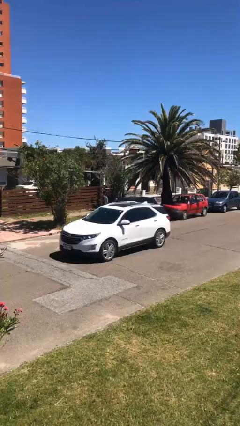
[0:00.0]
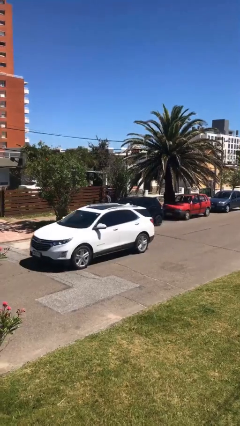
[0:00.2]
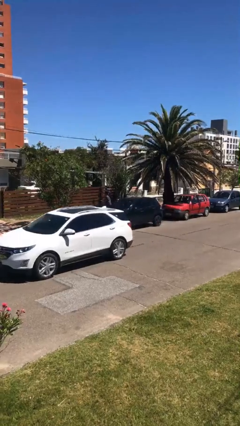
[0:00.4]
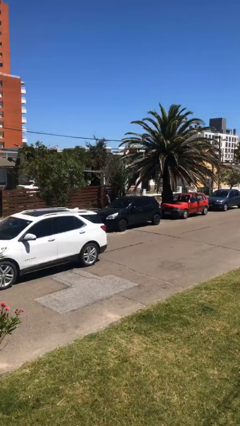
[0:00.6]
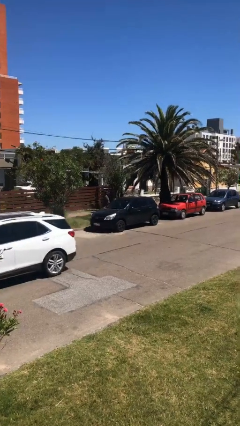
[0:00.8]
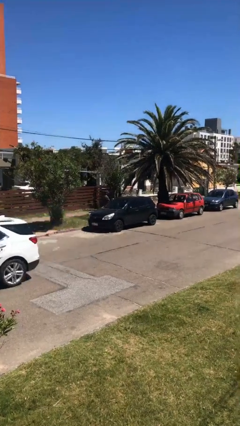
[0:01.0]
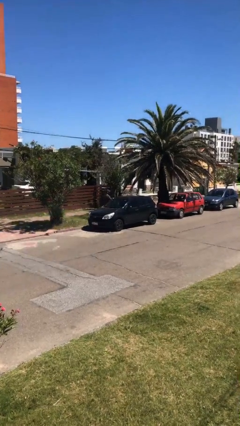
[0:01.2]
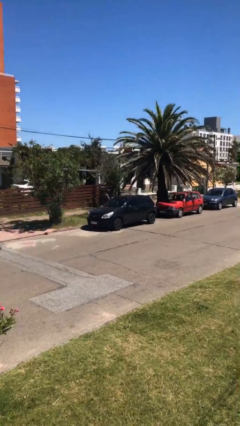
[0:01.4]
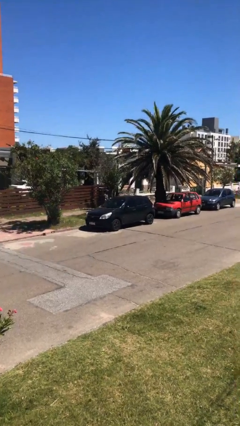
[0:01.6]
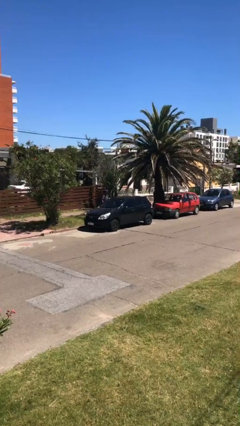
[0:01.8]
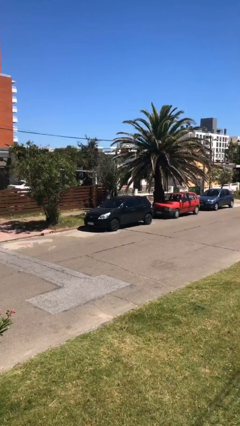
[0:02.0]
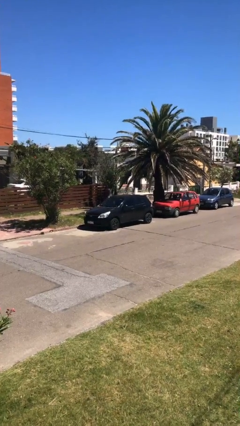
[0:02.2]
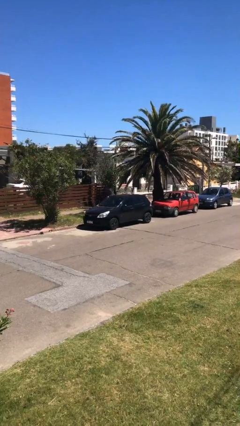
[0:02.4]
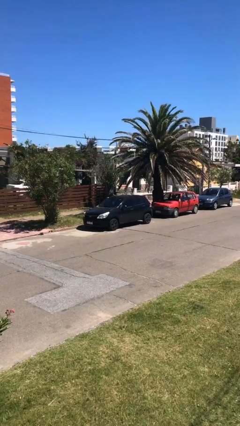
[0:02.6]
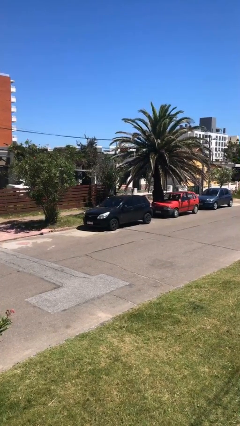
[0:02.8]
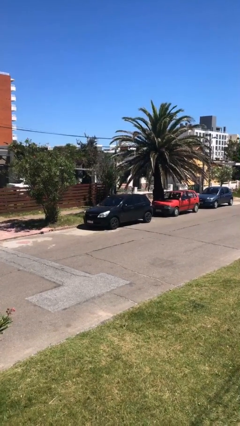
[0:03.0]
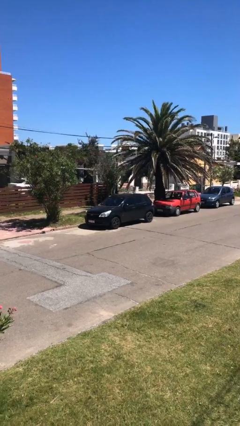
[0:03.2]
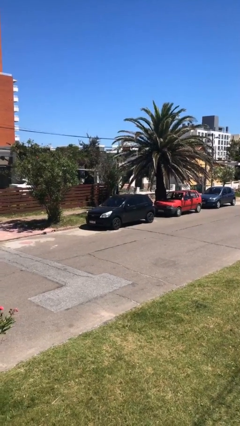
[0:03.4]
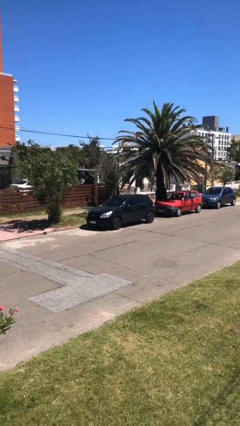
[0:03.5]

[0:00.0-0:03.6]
car picks up person

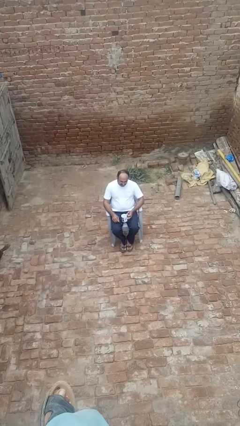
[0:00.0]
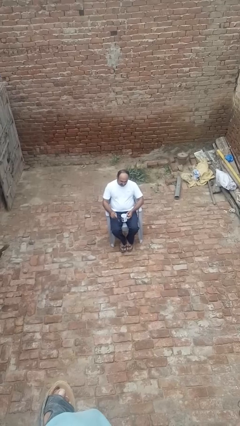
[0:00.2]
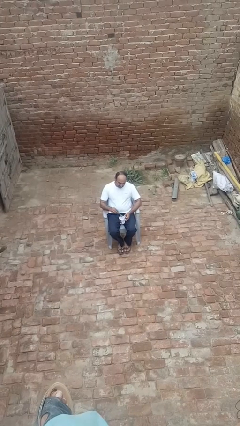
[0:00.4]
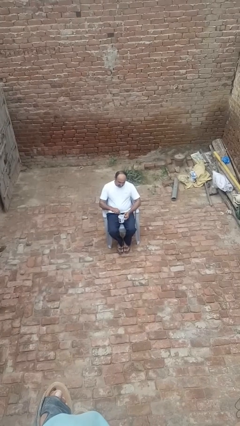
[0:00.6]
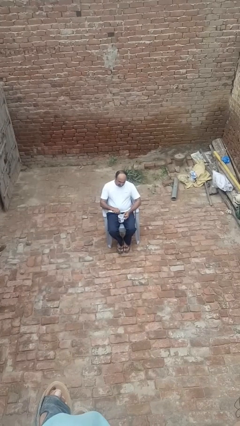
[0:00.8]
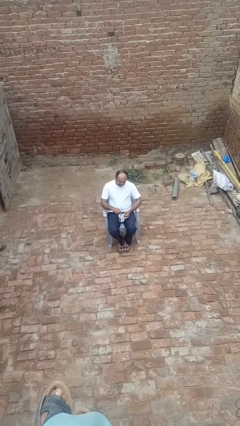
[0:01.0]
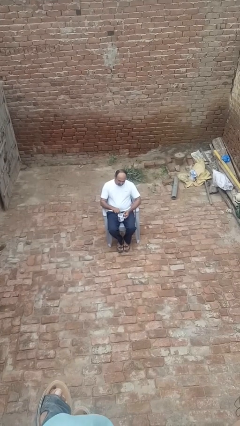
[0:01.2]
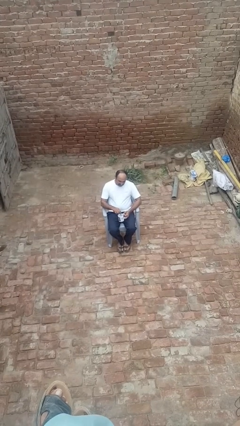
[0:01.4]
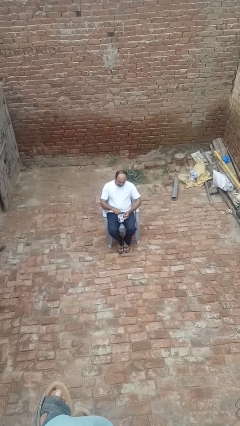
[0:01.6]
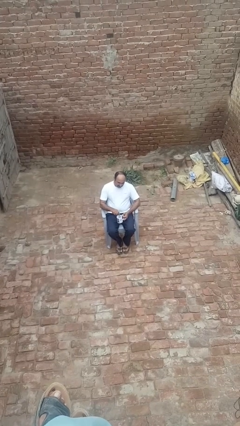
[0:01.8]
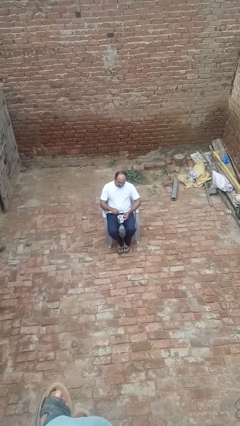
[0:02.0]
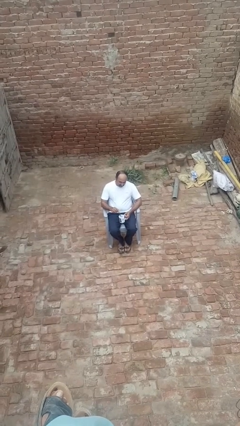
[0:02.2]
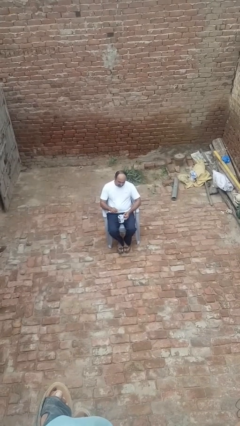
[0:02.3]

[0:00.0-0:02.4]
person stirs mug

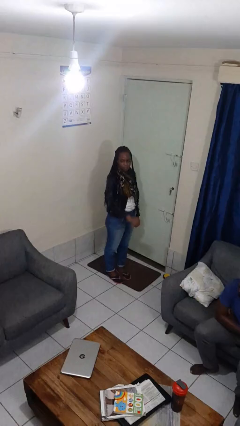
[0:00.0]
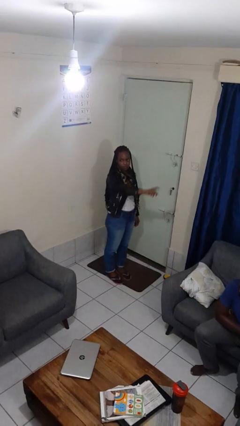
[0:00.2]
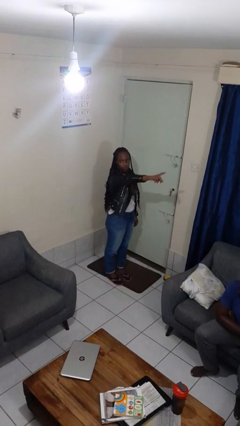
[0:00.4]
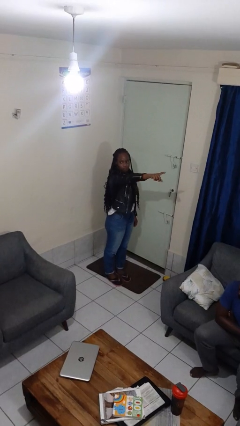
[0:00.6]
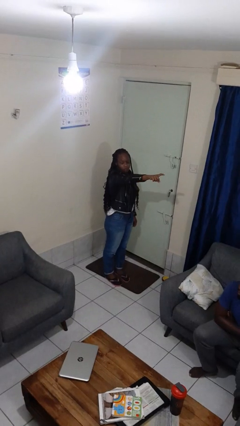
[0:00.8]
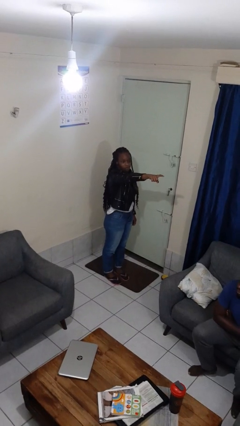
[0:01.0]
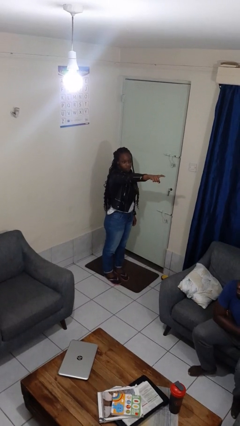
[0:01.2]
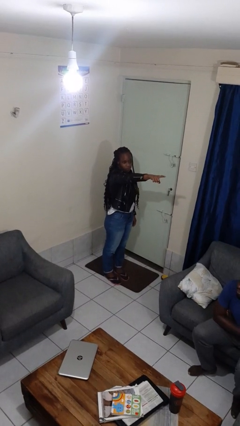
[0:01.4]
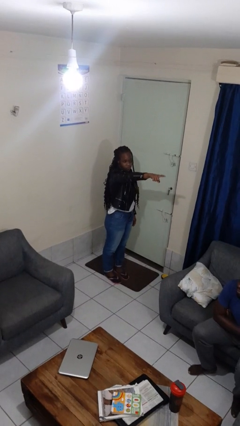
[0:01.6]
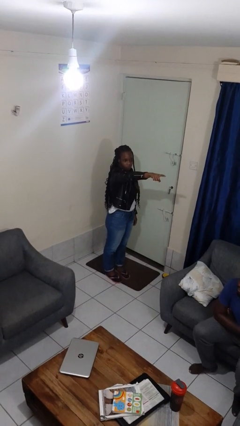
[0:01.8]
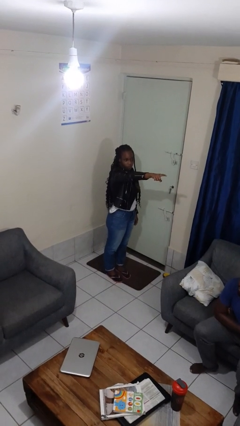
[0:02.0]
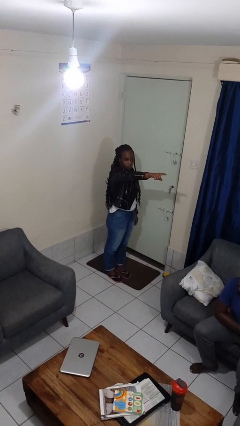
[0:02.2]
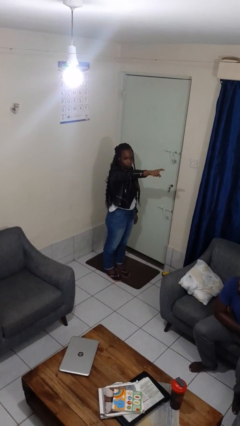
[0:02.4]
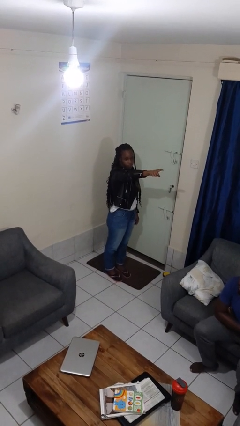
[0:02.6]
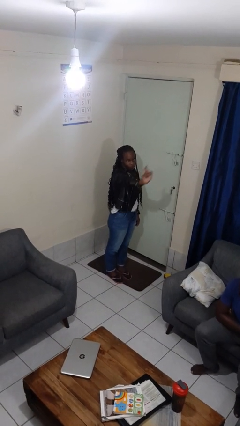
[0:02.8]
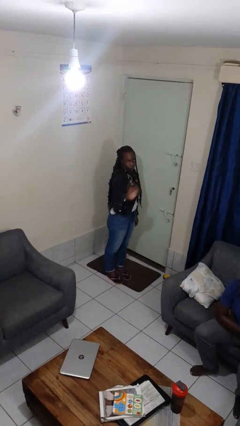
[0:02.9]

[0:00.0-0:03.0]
person points at person

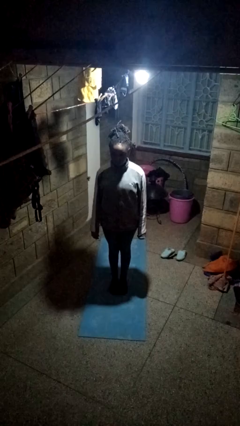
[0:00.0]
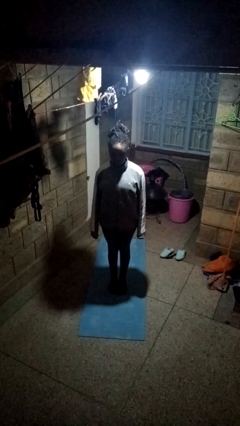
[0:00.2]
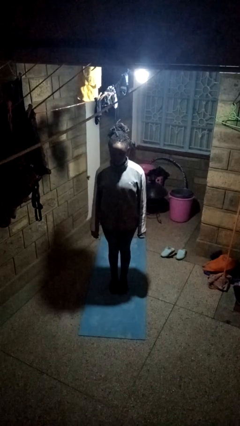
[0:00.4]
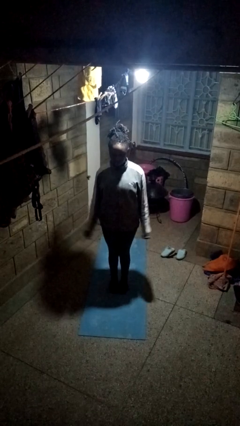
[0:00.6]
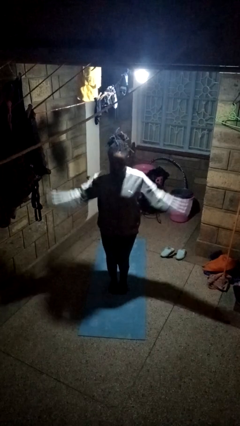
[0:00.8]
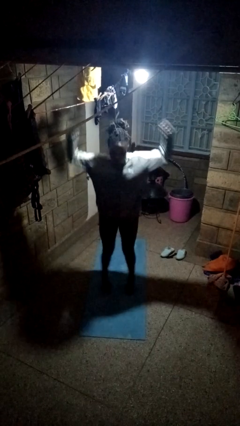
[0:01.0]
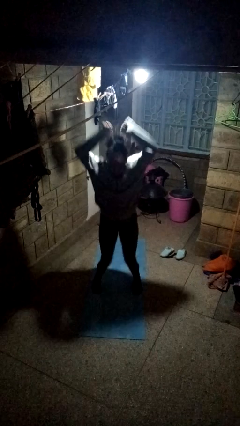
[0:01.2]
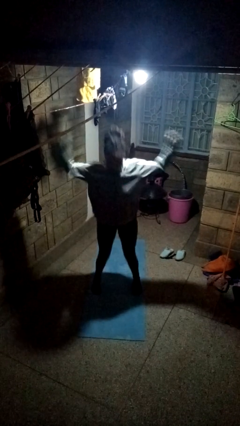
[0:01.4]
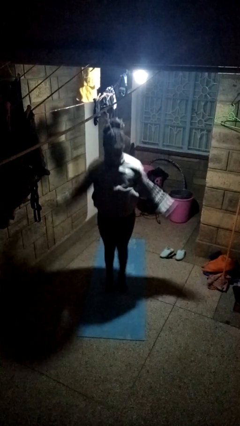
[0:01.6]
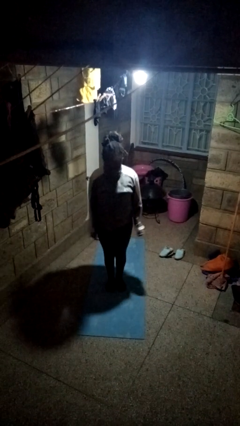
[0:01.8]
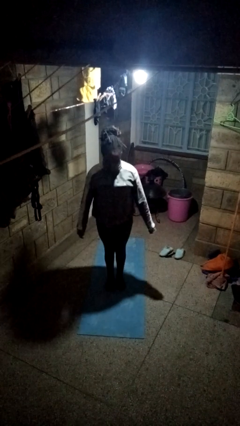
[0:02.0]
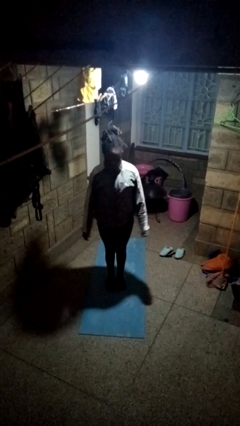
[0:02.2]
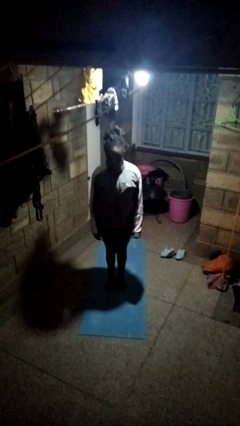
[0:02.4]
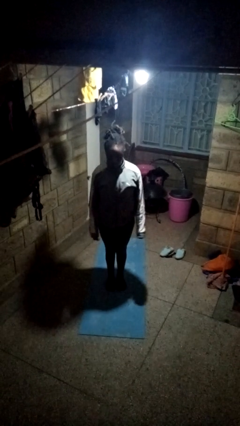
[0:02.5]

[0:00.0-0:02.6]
person exercises with jumping jacks

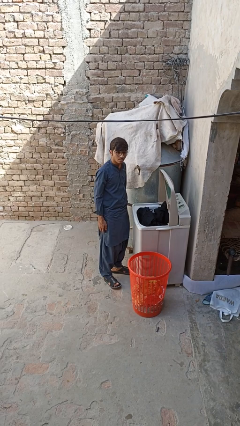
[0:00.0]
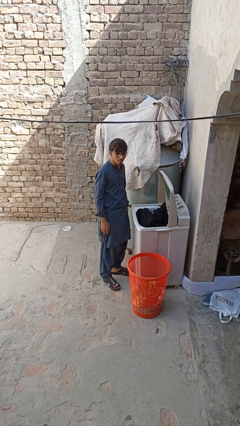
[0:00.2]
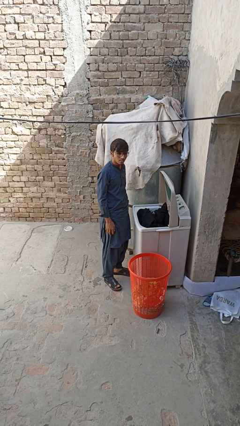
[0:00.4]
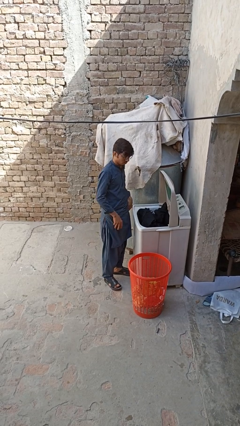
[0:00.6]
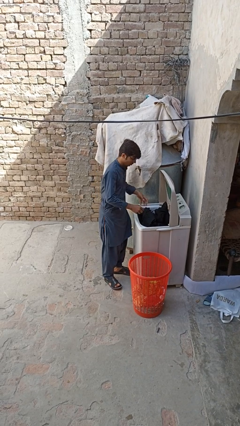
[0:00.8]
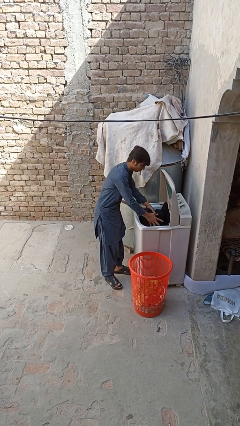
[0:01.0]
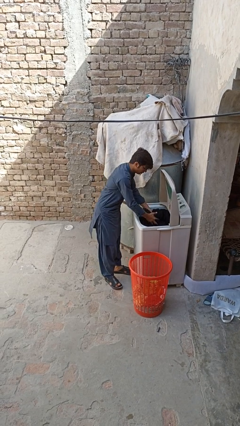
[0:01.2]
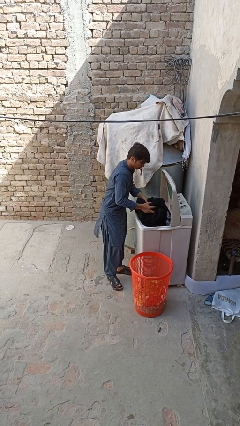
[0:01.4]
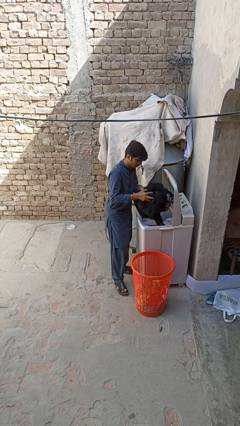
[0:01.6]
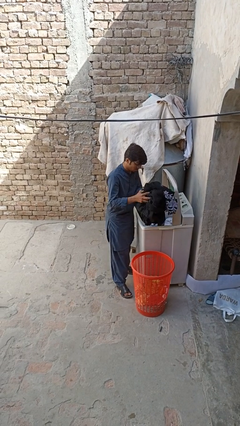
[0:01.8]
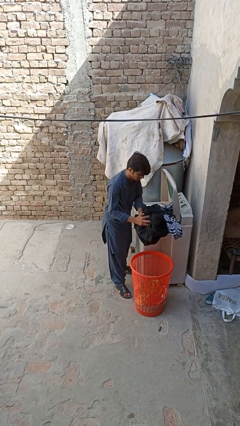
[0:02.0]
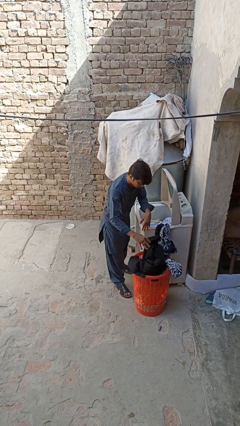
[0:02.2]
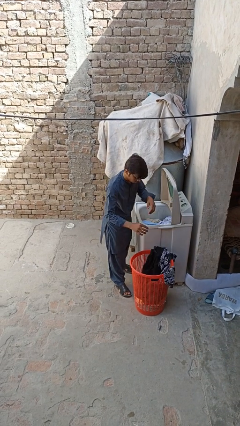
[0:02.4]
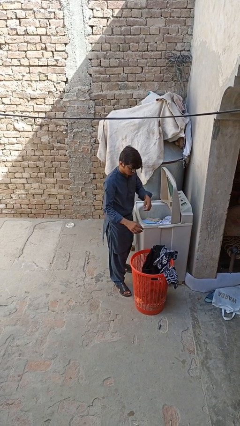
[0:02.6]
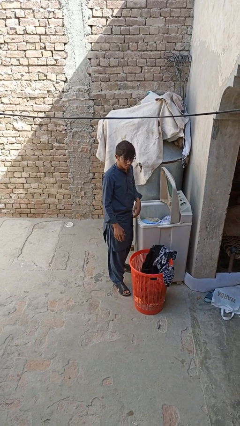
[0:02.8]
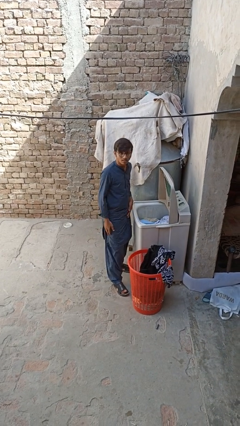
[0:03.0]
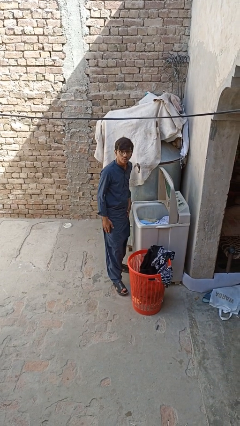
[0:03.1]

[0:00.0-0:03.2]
person unloads clotheswasher

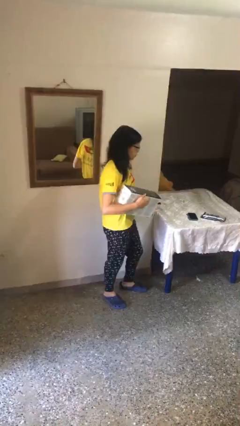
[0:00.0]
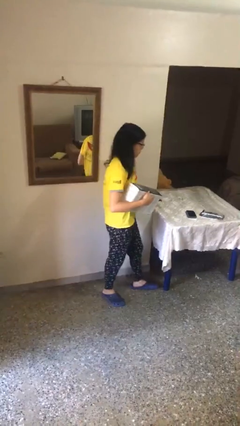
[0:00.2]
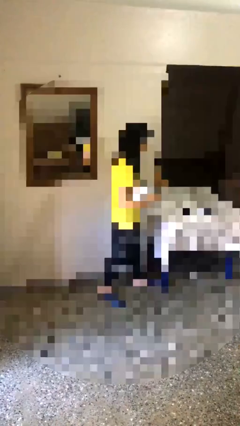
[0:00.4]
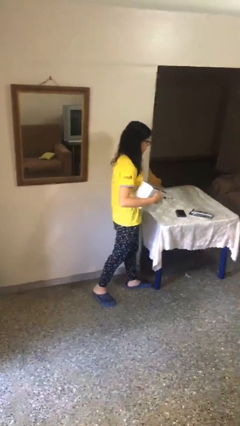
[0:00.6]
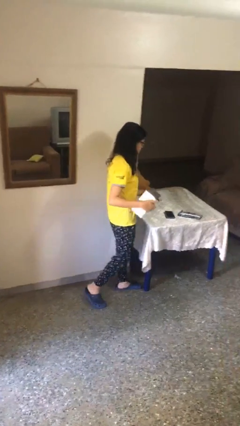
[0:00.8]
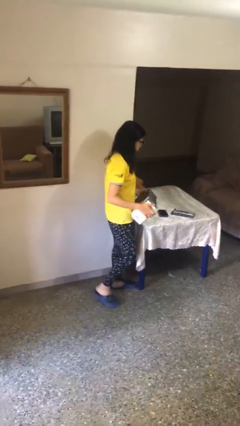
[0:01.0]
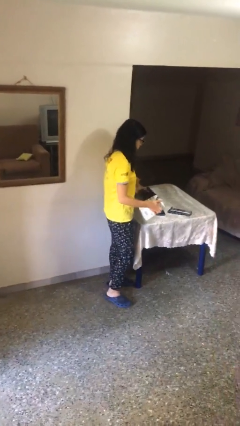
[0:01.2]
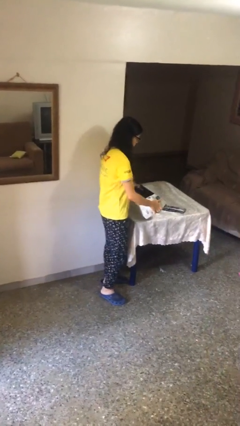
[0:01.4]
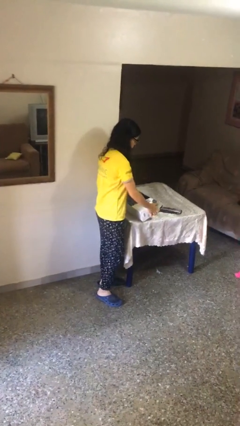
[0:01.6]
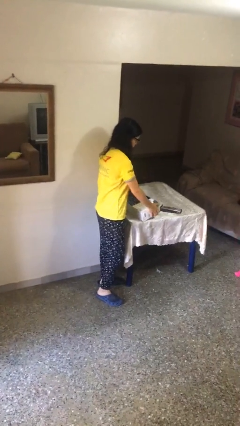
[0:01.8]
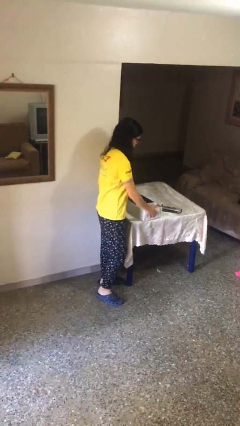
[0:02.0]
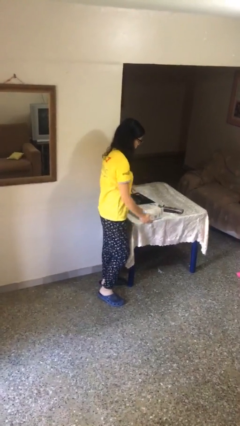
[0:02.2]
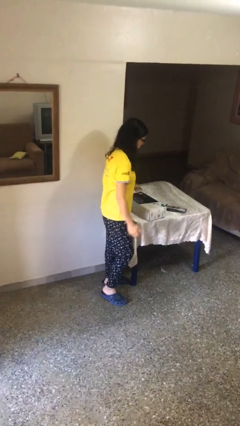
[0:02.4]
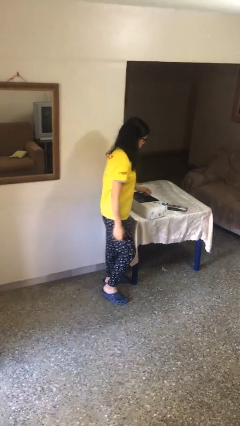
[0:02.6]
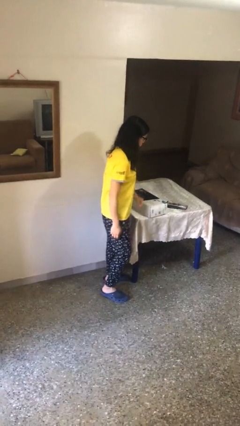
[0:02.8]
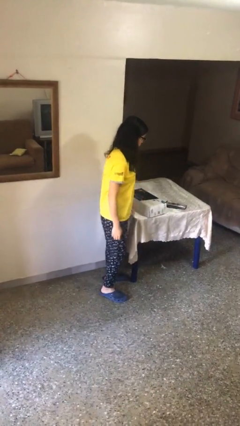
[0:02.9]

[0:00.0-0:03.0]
person puts down object on table
